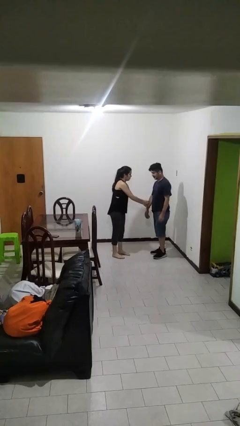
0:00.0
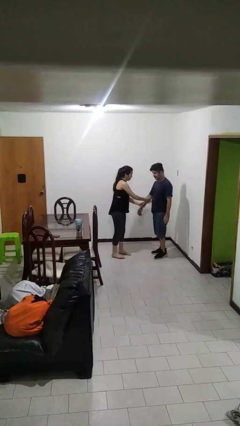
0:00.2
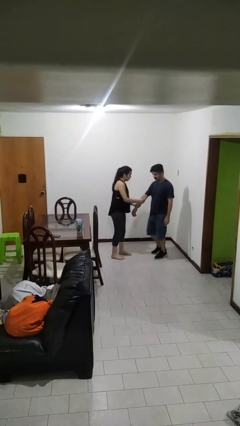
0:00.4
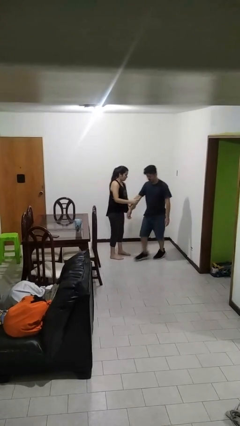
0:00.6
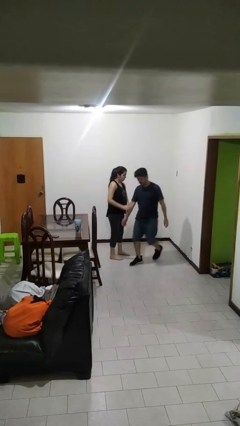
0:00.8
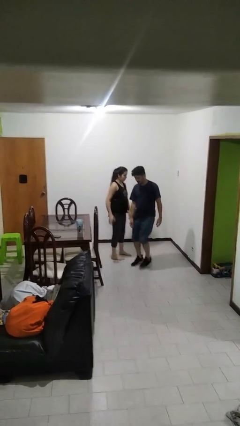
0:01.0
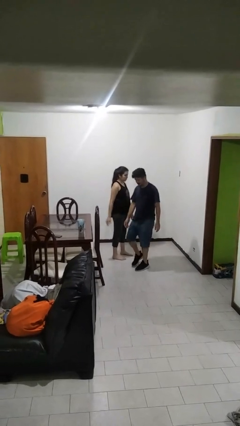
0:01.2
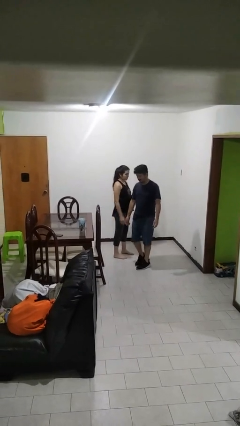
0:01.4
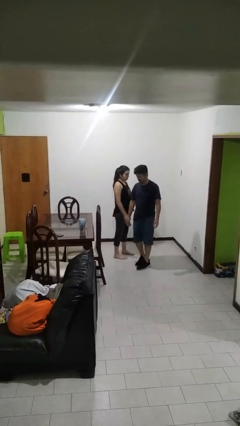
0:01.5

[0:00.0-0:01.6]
person grabs person by forearm

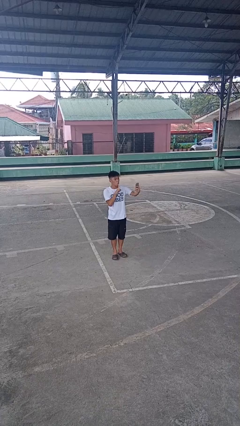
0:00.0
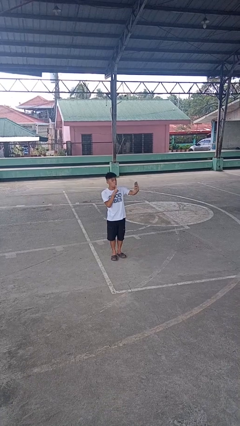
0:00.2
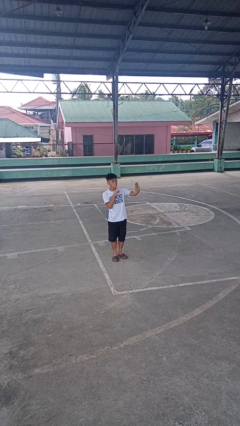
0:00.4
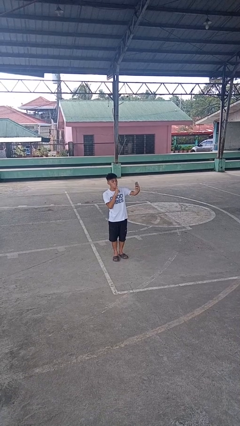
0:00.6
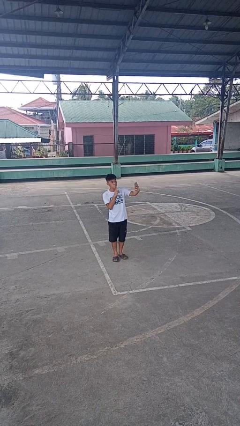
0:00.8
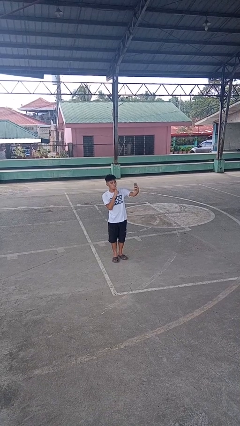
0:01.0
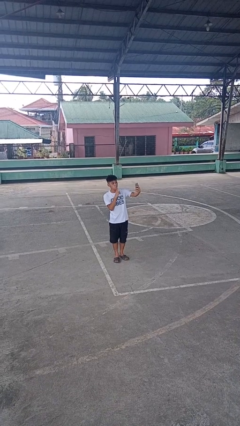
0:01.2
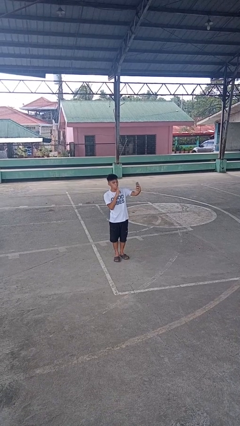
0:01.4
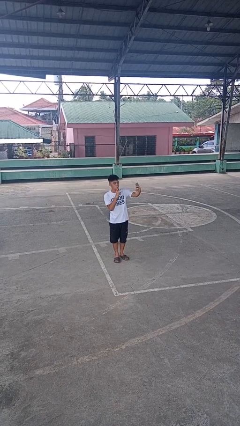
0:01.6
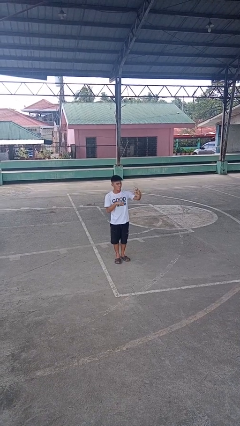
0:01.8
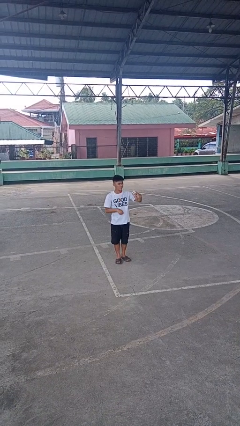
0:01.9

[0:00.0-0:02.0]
person takes selfie

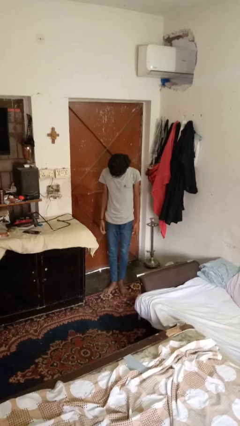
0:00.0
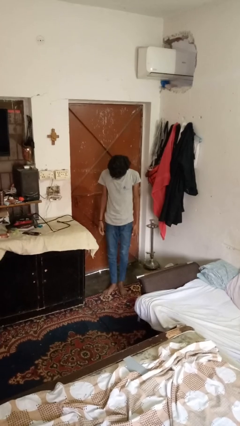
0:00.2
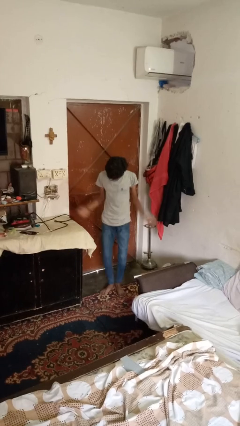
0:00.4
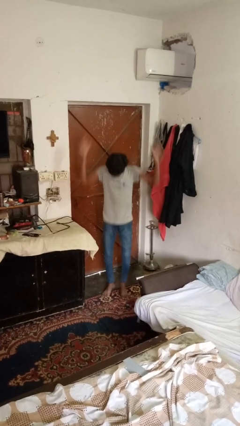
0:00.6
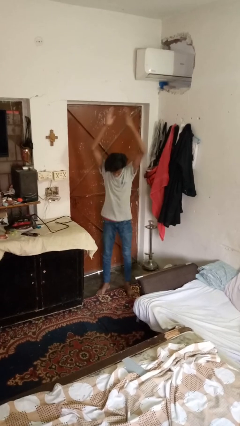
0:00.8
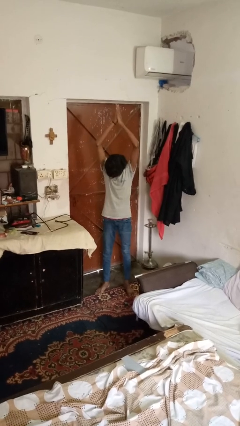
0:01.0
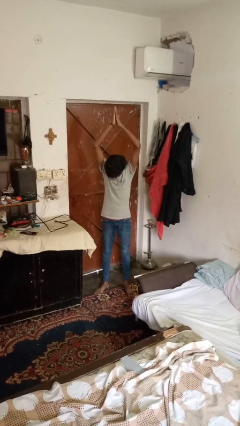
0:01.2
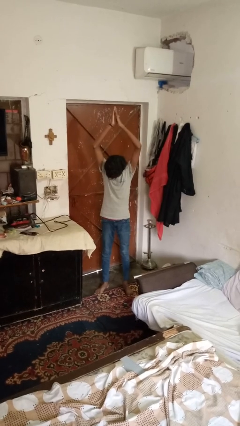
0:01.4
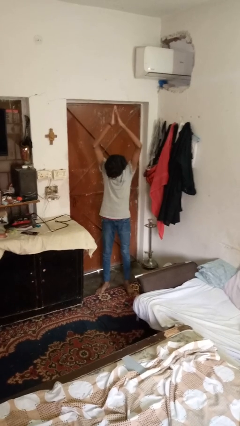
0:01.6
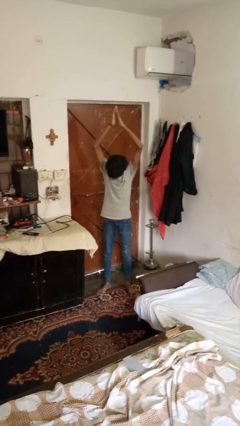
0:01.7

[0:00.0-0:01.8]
person exercises with jumping jacks

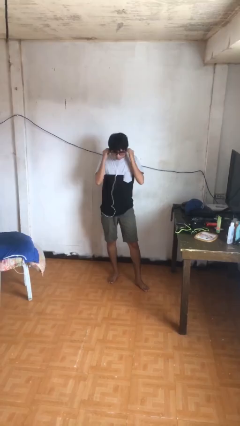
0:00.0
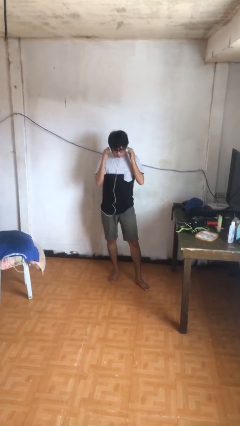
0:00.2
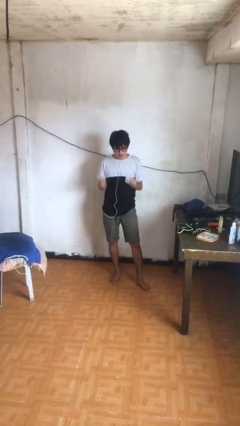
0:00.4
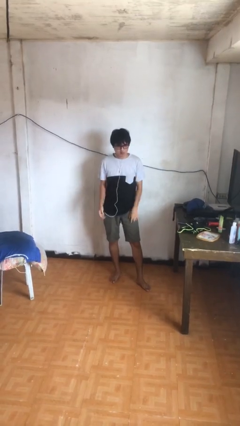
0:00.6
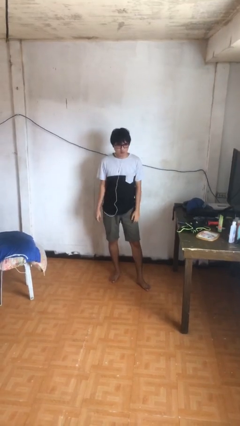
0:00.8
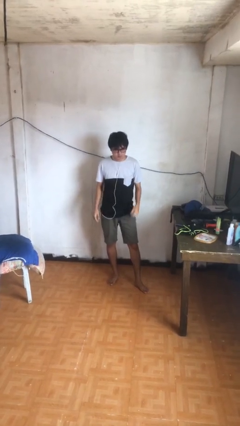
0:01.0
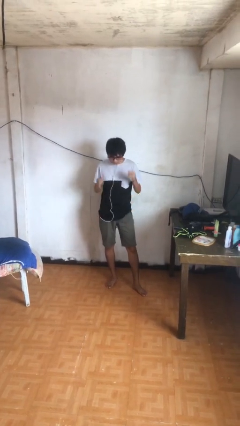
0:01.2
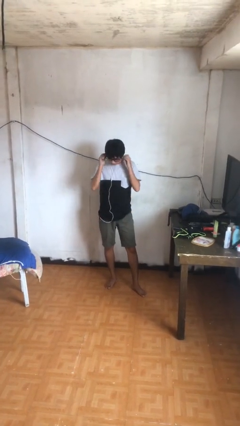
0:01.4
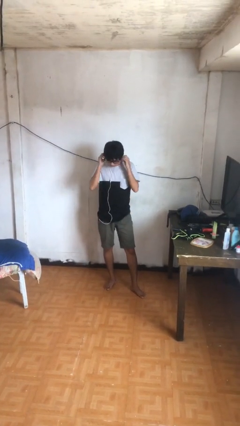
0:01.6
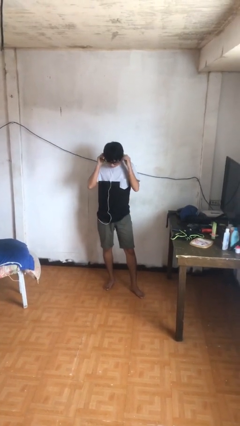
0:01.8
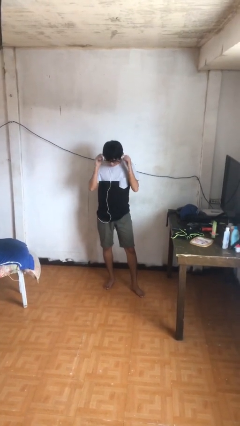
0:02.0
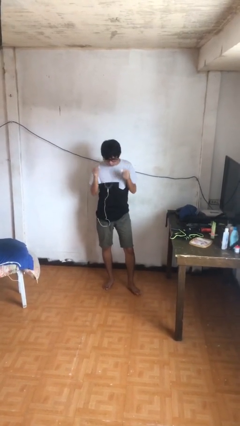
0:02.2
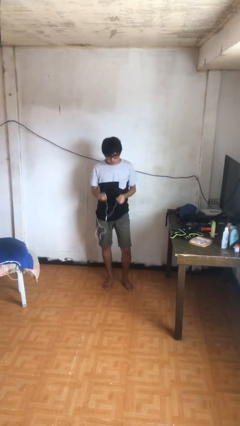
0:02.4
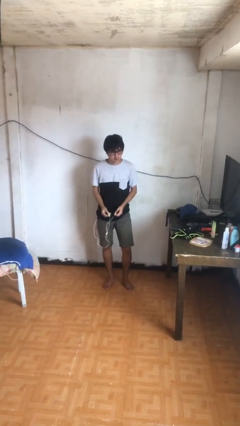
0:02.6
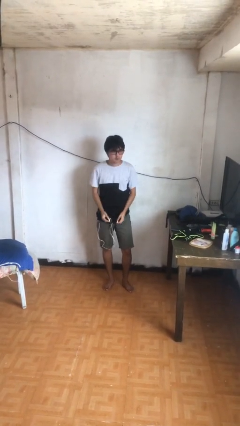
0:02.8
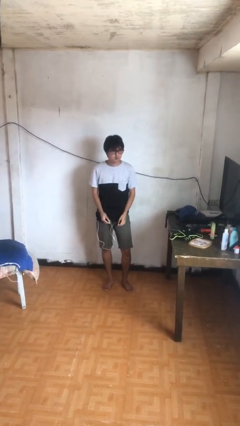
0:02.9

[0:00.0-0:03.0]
person takes off headphones

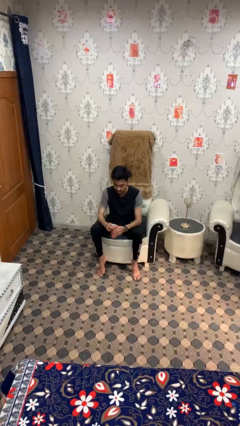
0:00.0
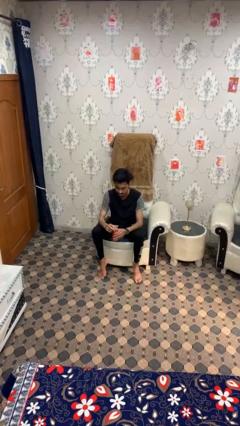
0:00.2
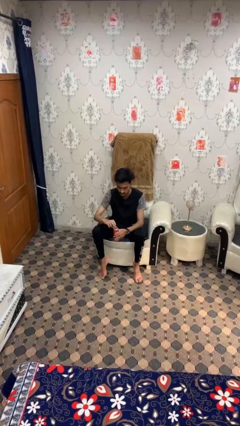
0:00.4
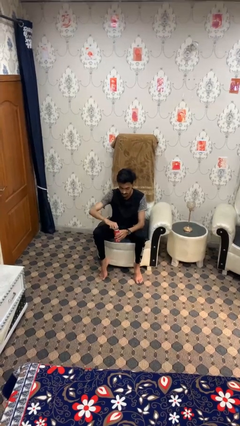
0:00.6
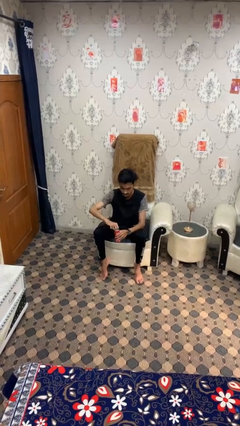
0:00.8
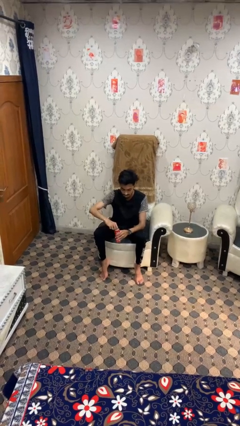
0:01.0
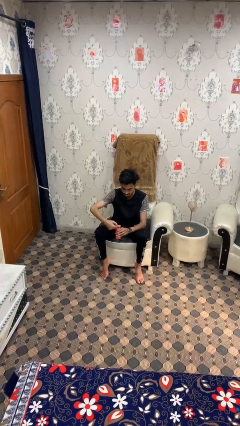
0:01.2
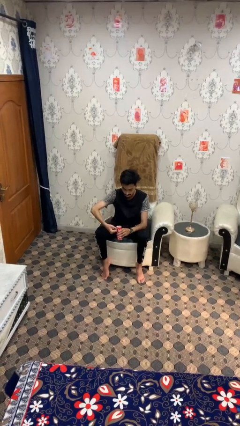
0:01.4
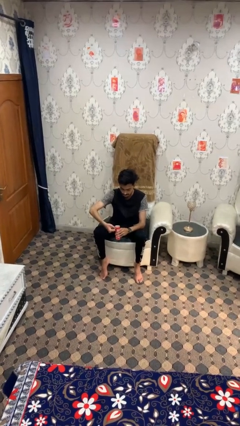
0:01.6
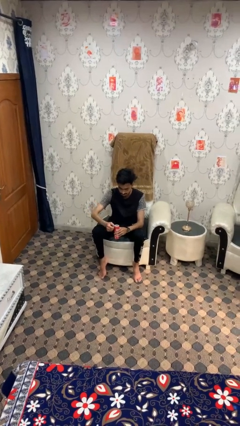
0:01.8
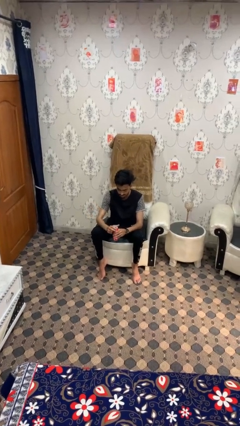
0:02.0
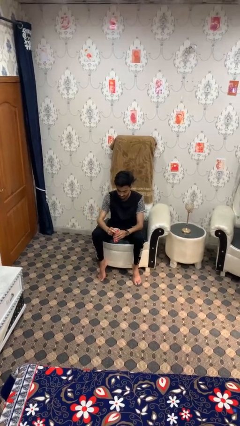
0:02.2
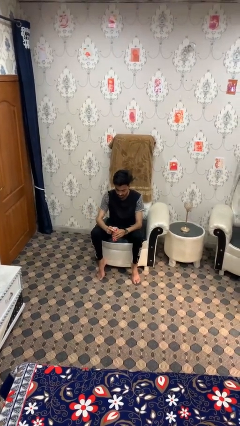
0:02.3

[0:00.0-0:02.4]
person opens beverage can

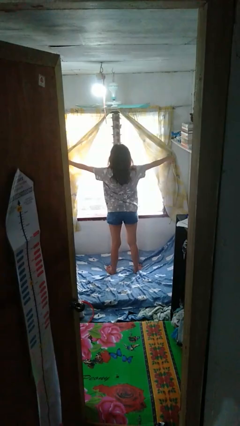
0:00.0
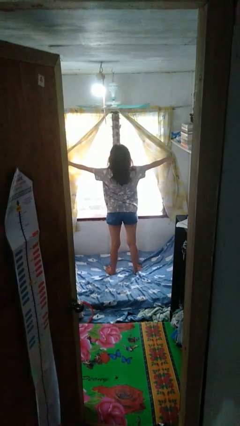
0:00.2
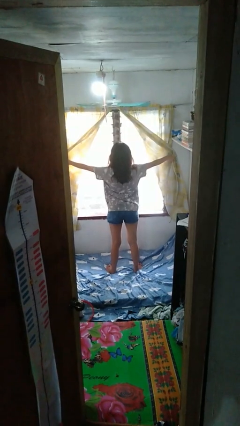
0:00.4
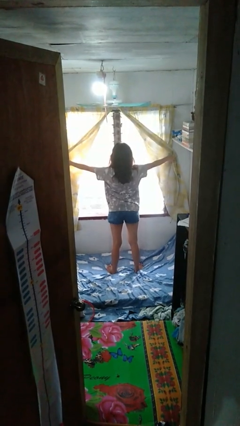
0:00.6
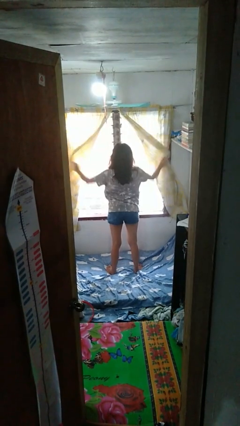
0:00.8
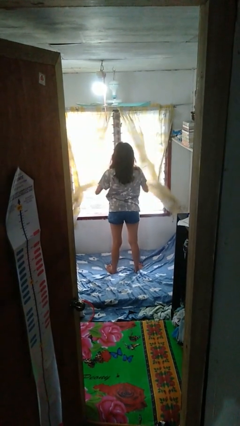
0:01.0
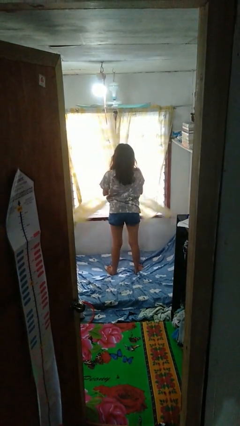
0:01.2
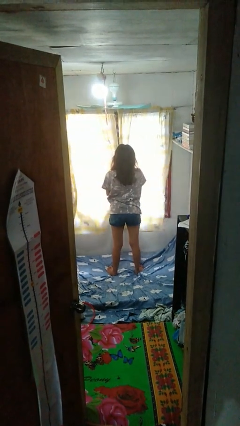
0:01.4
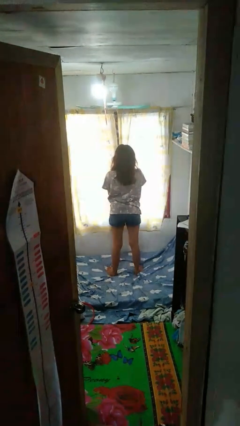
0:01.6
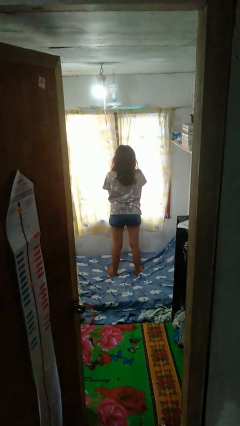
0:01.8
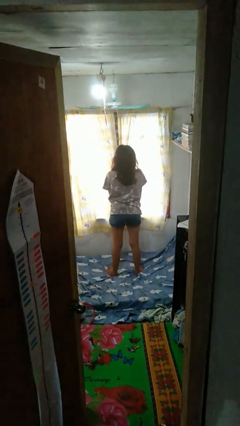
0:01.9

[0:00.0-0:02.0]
person closes curtains

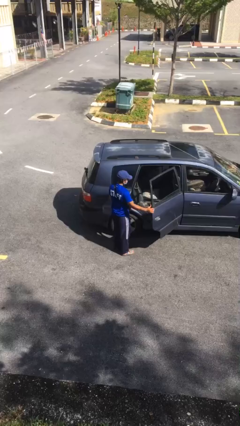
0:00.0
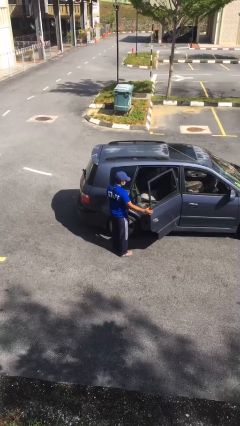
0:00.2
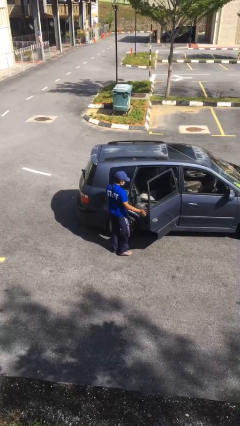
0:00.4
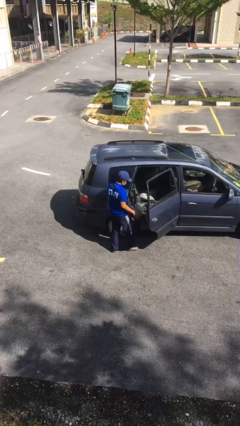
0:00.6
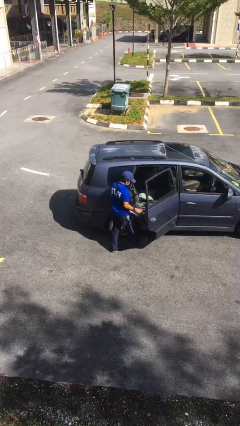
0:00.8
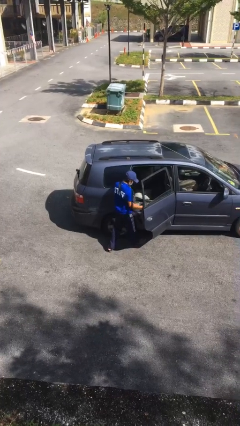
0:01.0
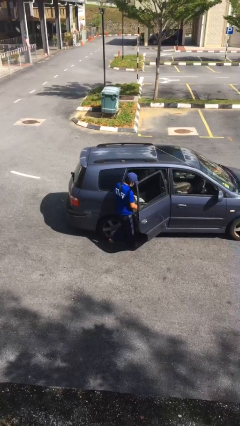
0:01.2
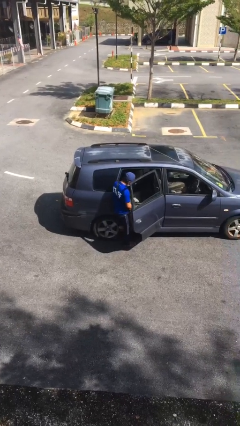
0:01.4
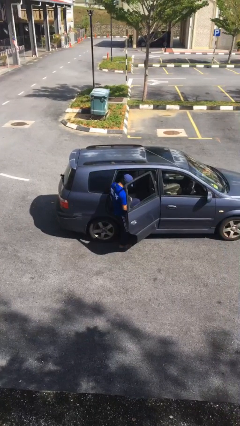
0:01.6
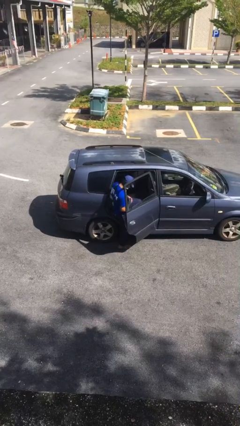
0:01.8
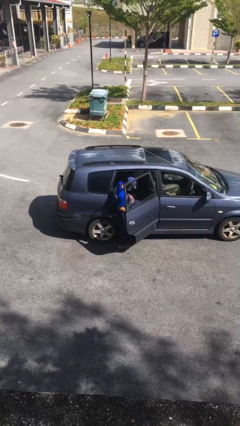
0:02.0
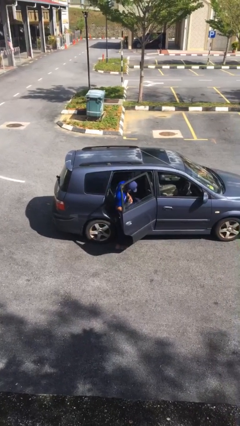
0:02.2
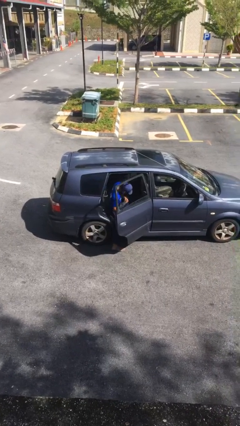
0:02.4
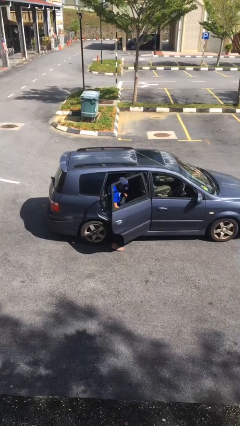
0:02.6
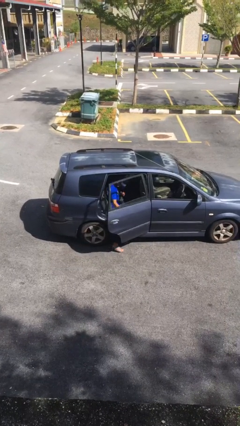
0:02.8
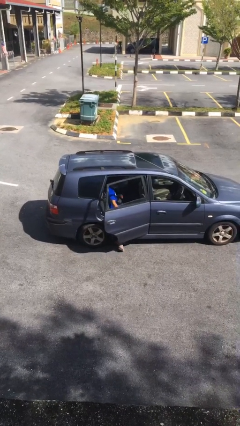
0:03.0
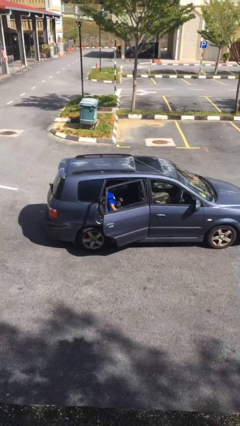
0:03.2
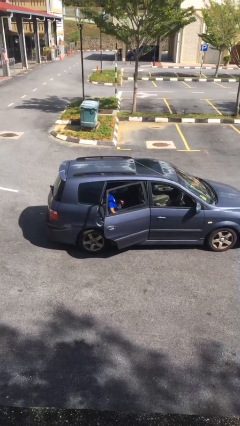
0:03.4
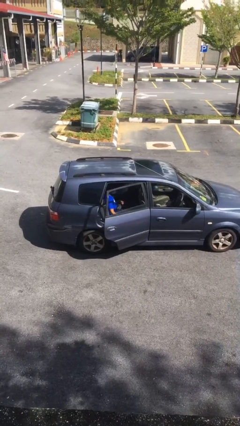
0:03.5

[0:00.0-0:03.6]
person enters car

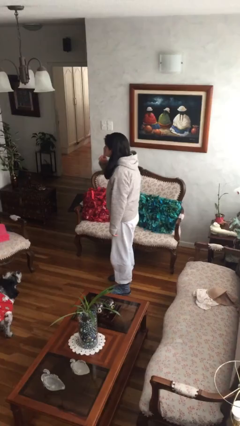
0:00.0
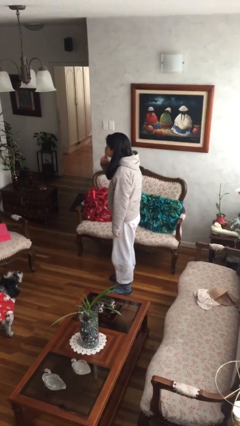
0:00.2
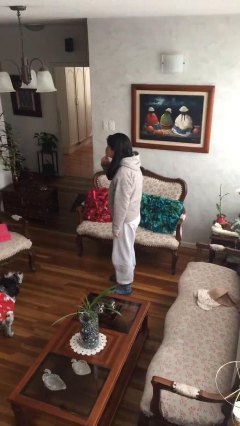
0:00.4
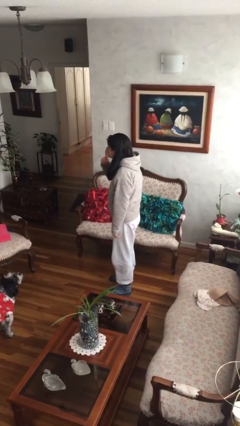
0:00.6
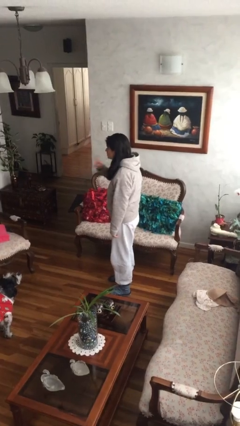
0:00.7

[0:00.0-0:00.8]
person gestures be quiet
